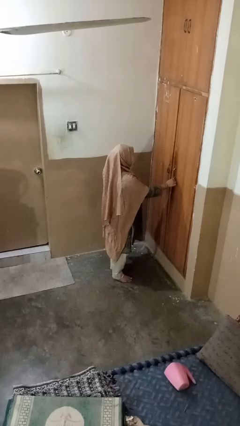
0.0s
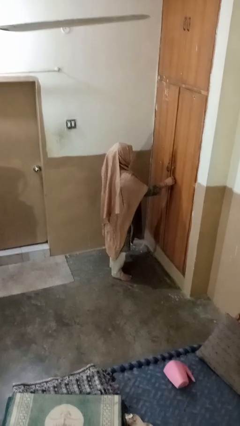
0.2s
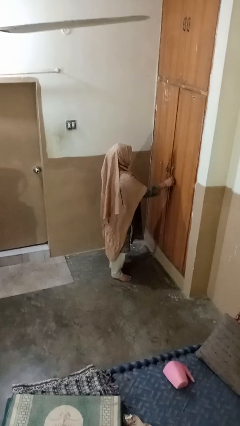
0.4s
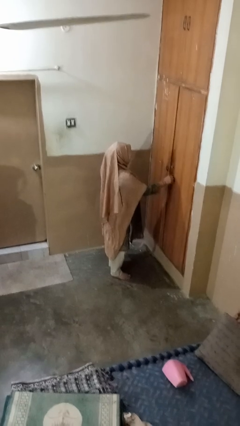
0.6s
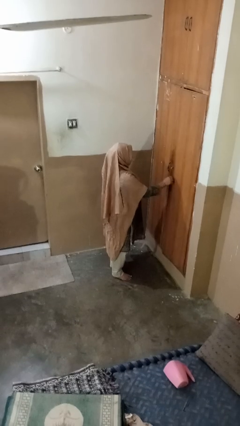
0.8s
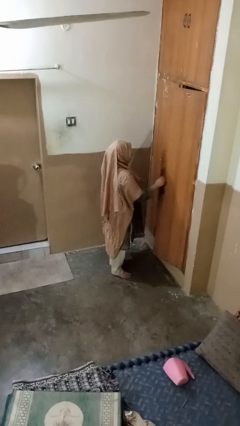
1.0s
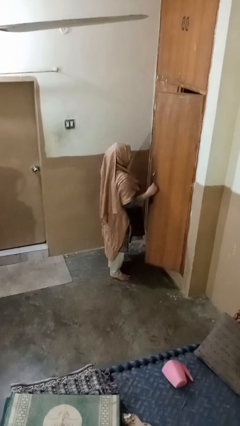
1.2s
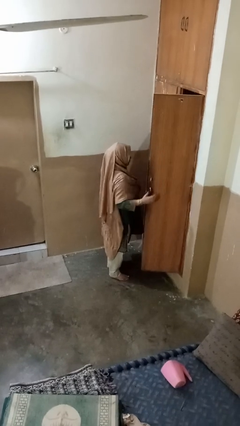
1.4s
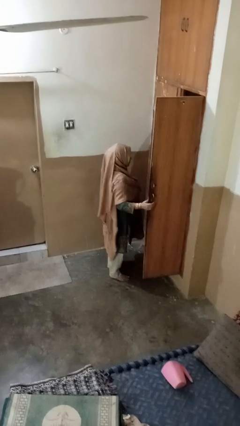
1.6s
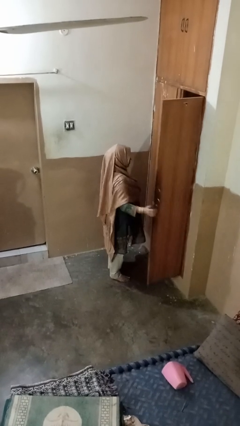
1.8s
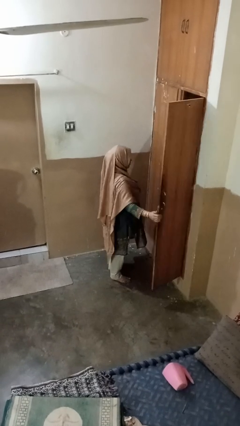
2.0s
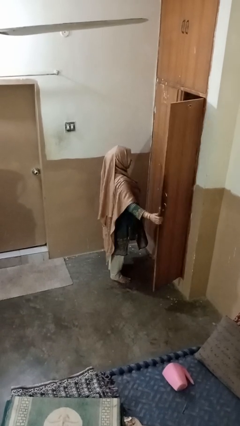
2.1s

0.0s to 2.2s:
person opens closet door

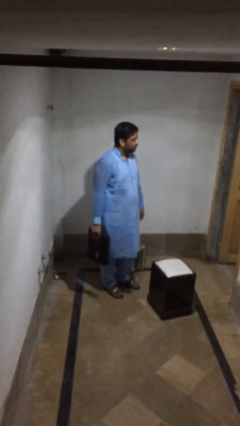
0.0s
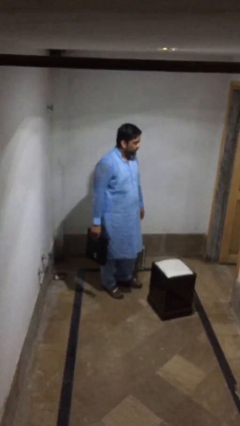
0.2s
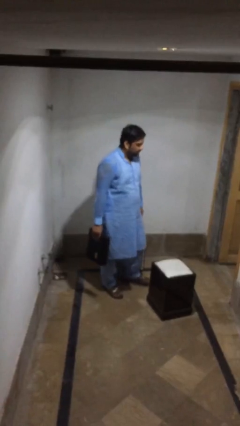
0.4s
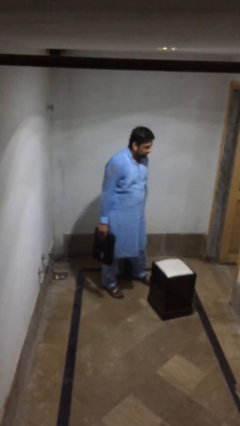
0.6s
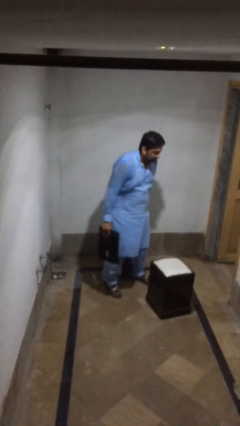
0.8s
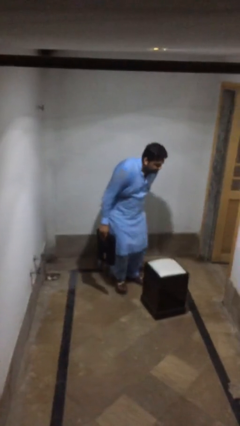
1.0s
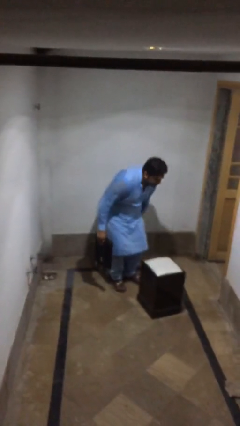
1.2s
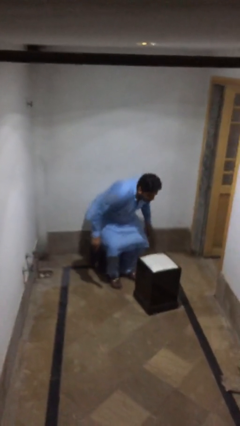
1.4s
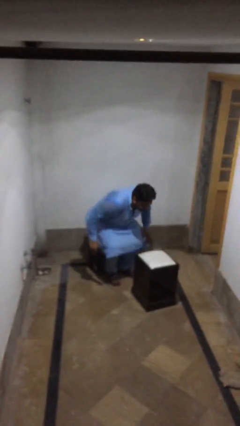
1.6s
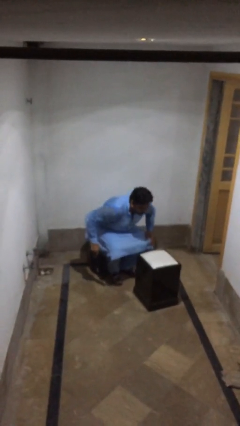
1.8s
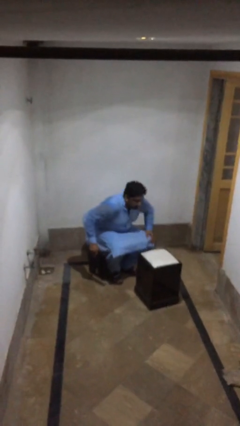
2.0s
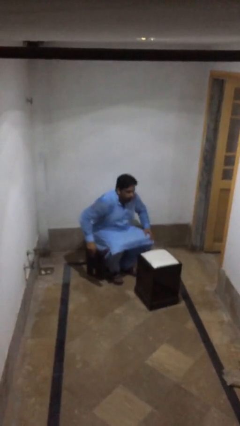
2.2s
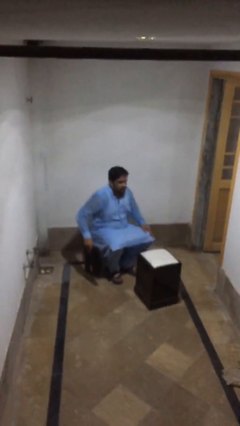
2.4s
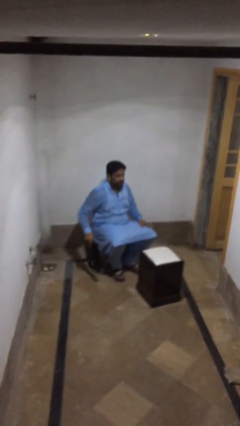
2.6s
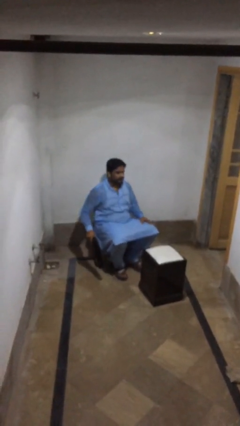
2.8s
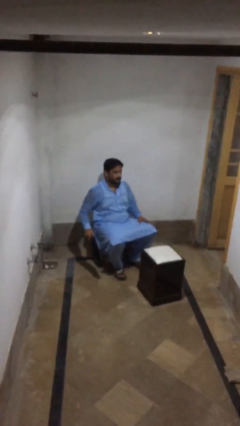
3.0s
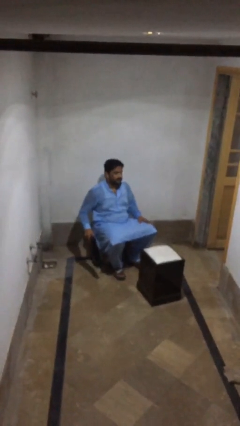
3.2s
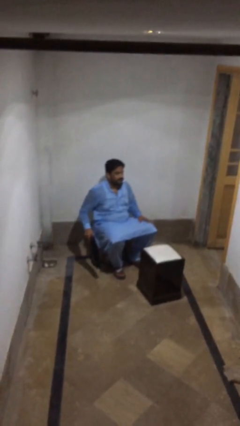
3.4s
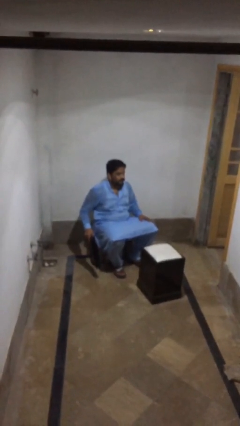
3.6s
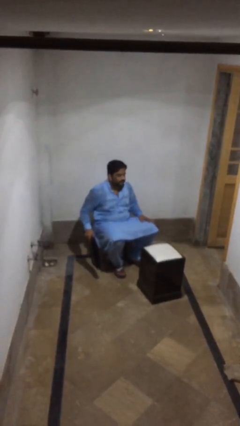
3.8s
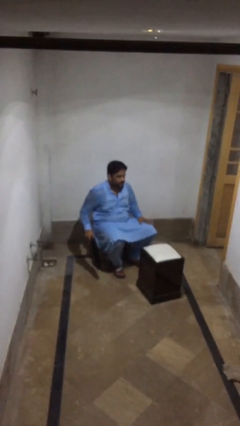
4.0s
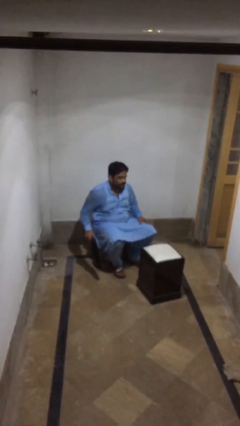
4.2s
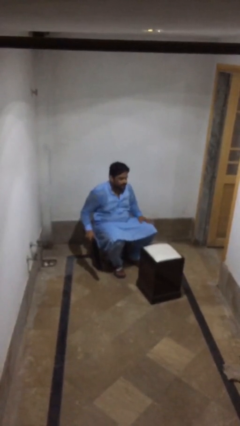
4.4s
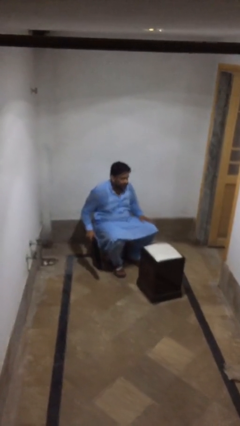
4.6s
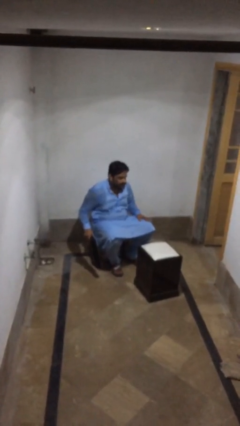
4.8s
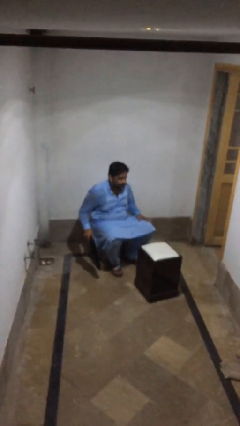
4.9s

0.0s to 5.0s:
person sits down

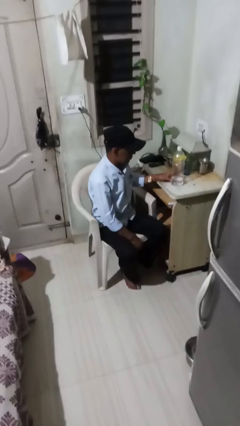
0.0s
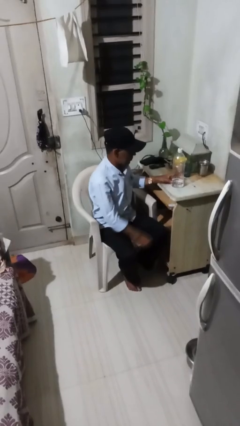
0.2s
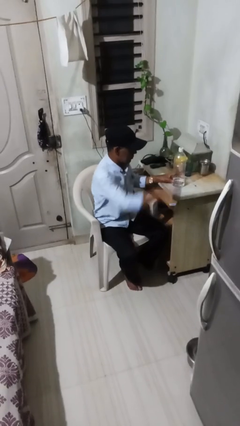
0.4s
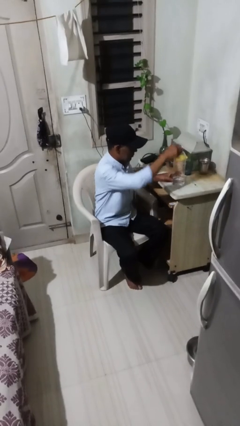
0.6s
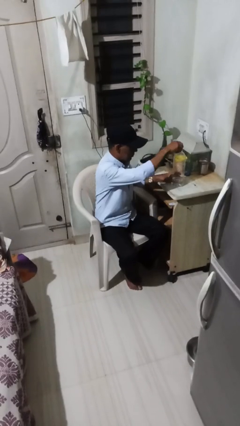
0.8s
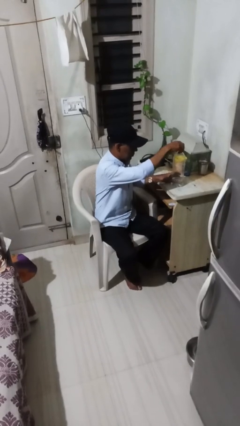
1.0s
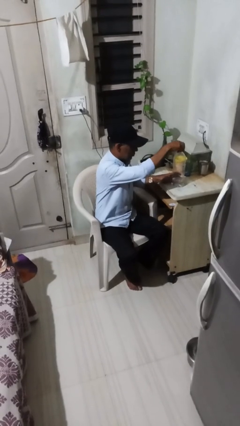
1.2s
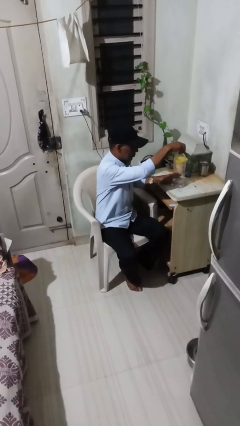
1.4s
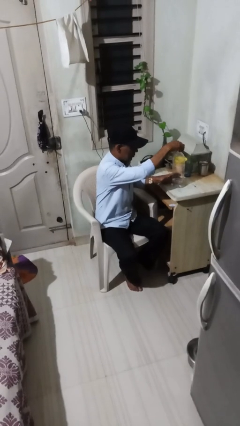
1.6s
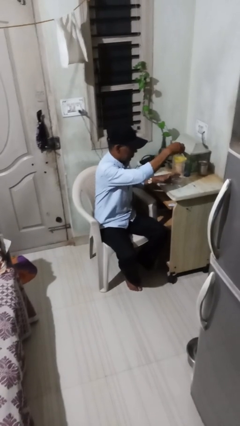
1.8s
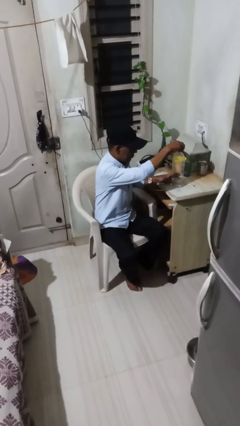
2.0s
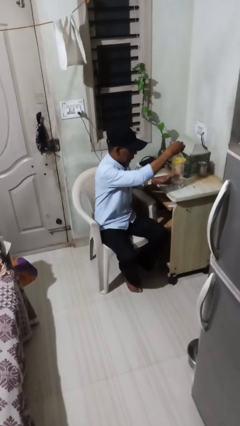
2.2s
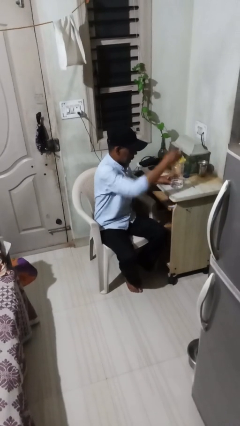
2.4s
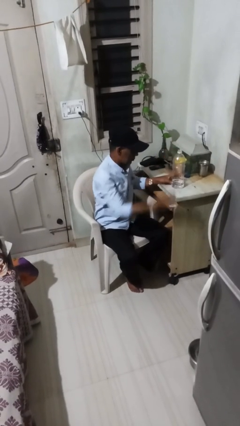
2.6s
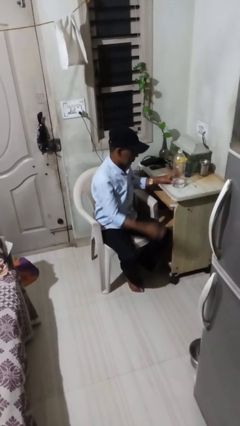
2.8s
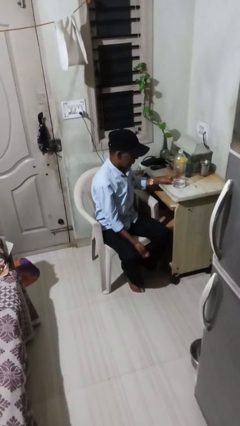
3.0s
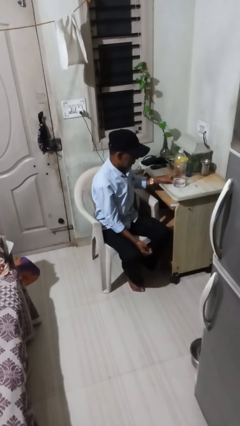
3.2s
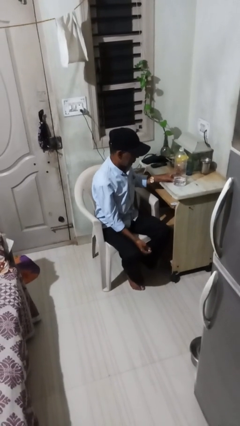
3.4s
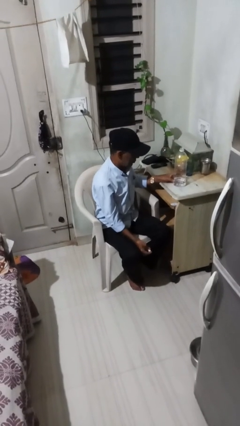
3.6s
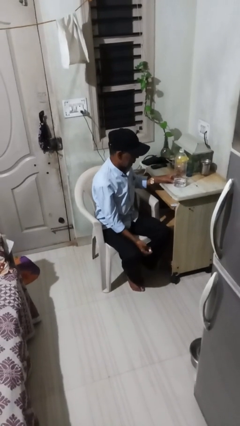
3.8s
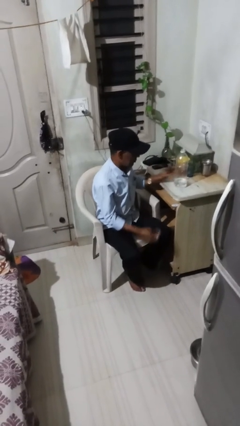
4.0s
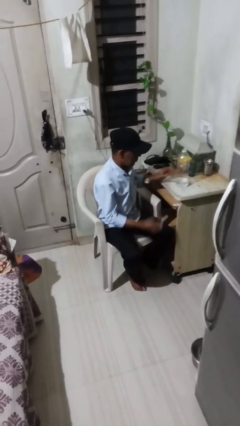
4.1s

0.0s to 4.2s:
person unscrews lid from bottle

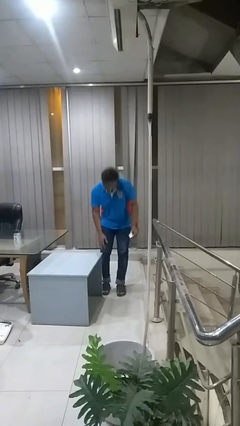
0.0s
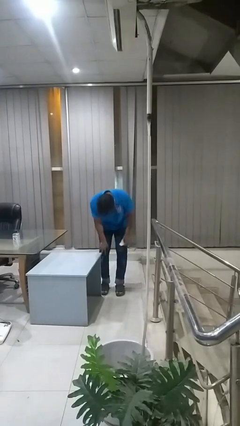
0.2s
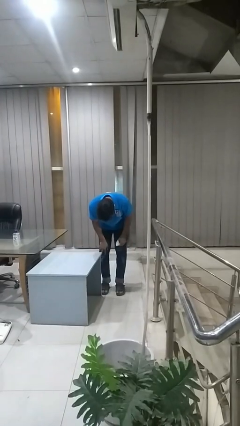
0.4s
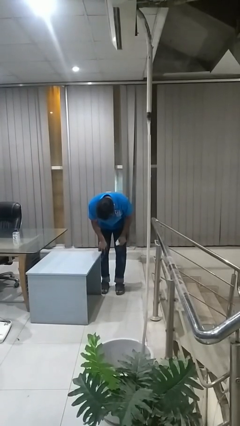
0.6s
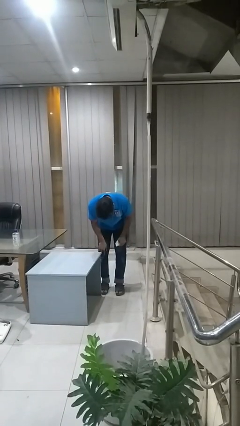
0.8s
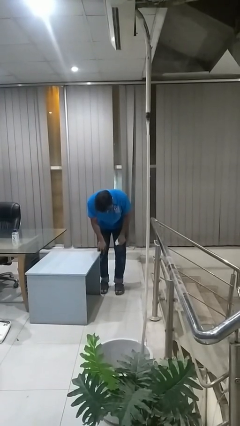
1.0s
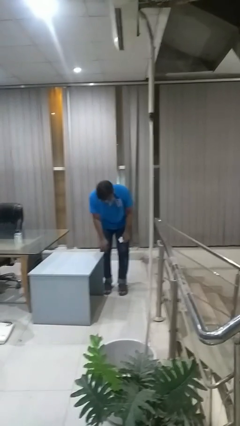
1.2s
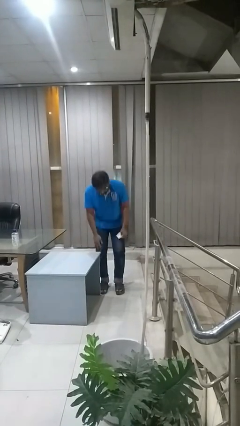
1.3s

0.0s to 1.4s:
person bumps into table

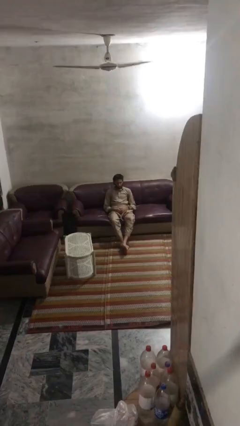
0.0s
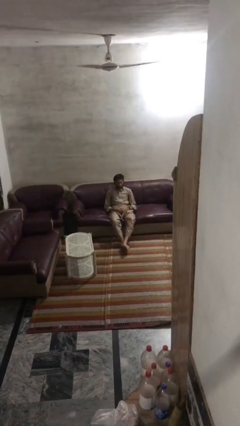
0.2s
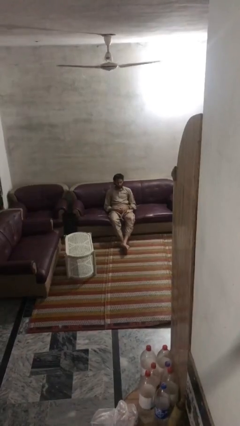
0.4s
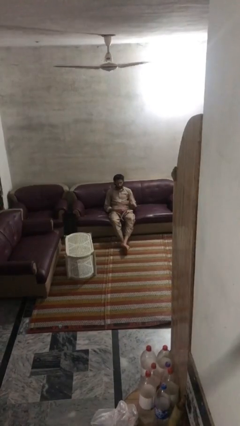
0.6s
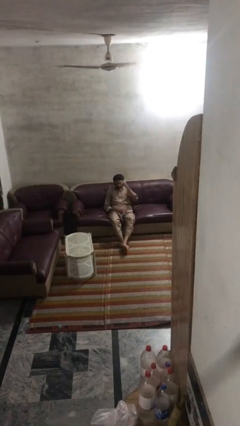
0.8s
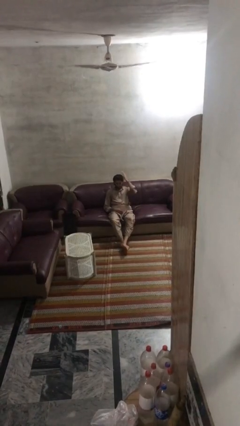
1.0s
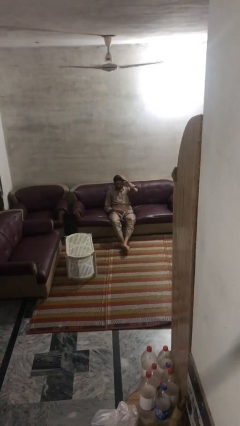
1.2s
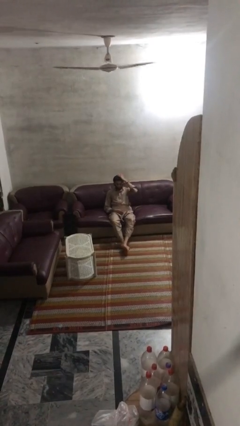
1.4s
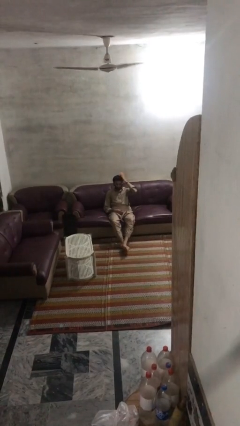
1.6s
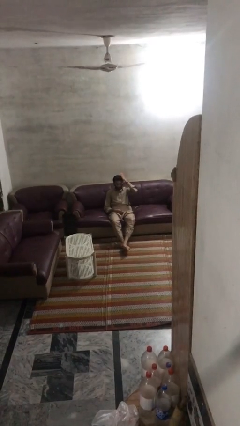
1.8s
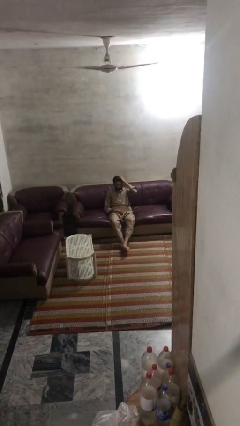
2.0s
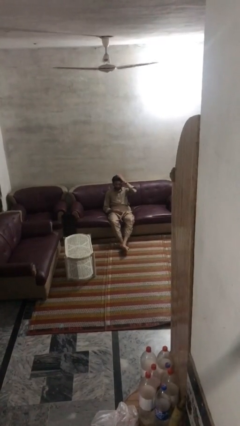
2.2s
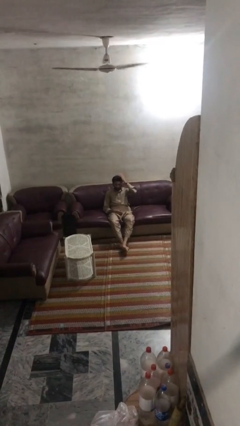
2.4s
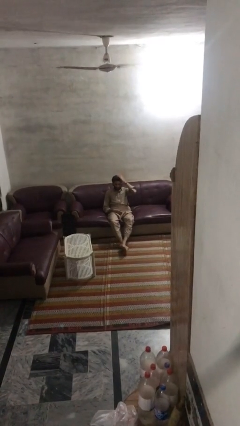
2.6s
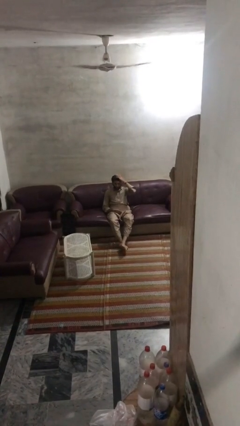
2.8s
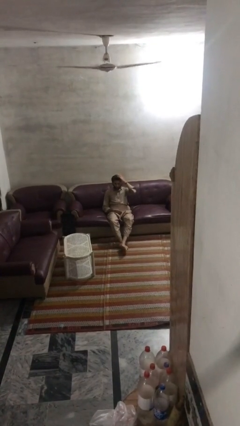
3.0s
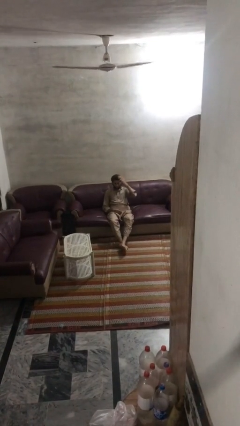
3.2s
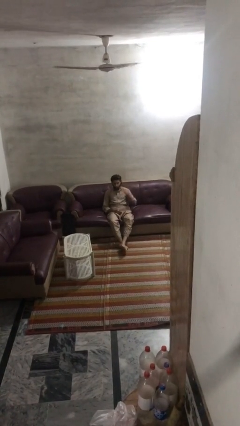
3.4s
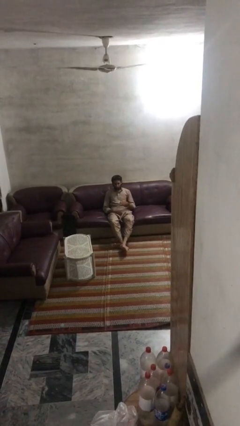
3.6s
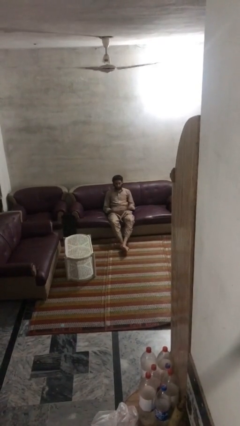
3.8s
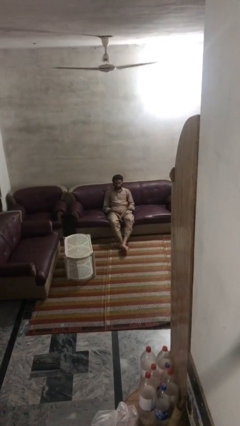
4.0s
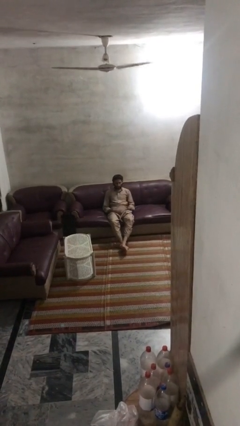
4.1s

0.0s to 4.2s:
person pats head

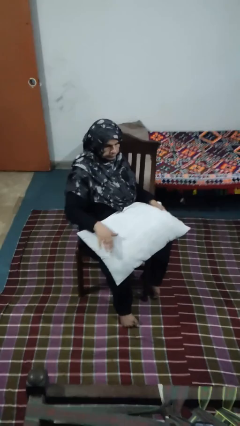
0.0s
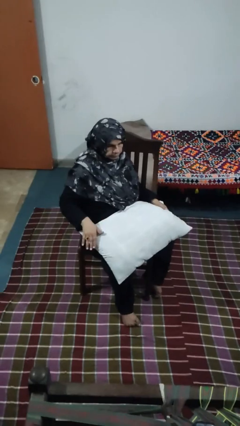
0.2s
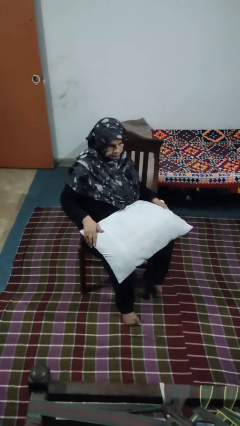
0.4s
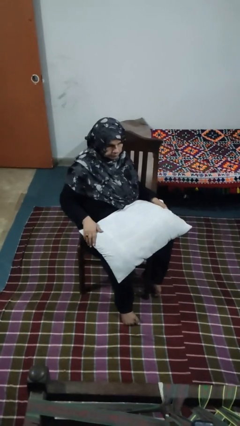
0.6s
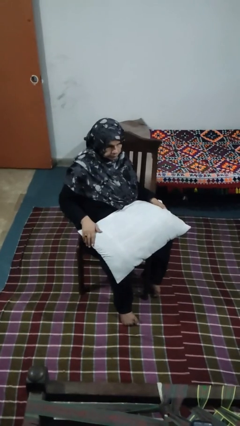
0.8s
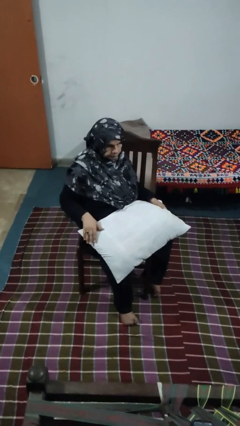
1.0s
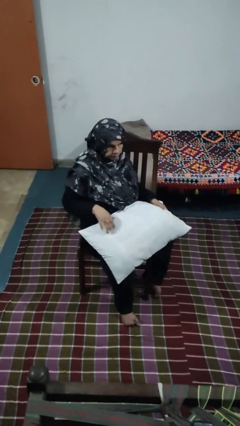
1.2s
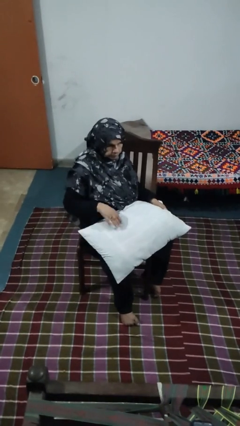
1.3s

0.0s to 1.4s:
person waves hand over object
